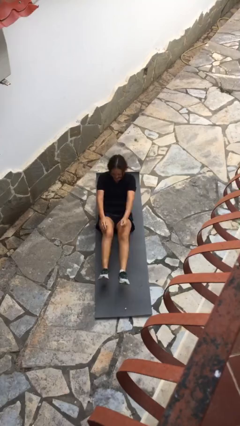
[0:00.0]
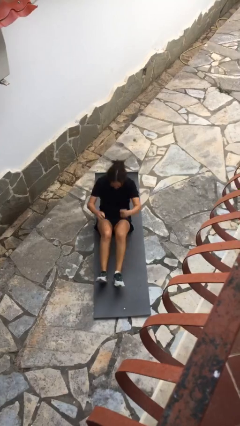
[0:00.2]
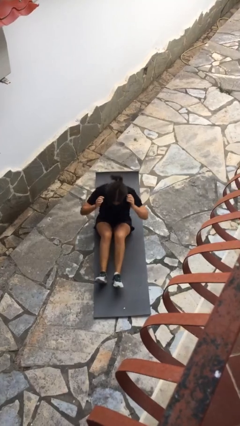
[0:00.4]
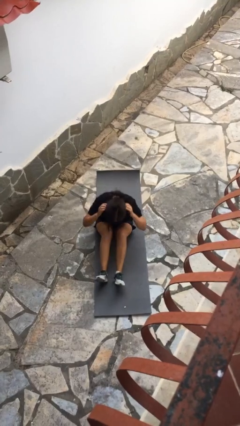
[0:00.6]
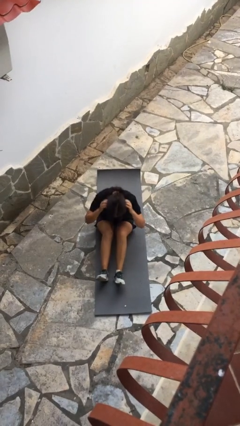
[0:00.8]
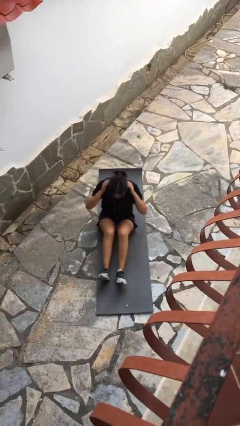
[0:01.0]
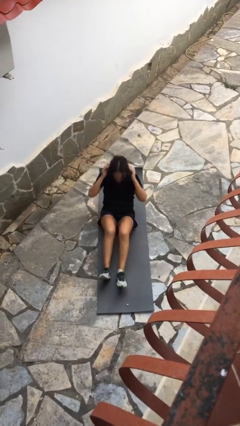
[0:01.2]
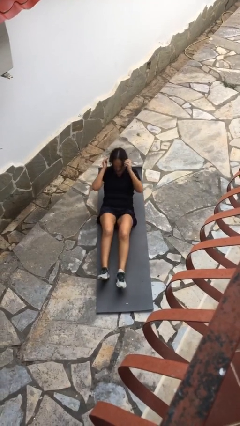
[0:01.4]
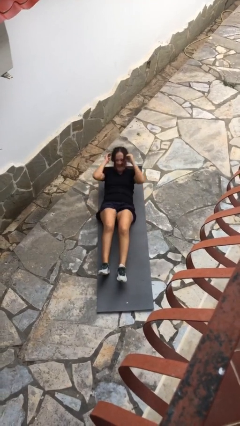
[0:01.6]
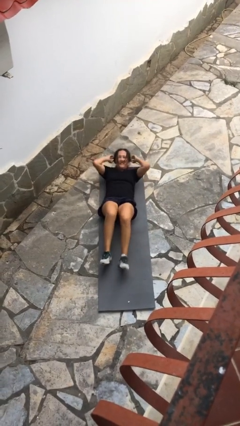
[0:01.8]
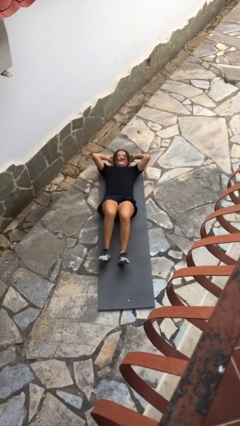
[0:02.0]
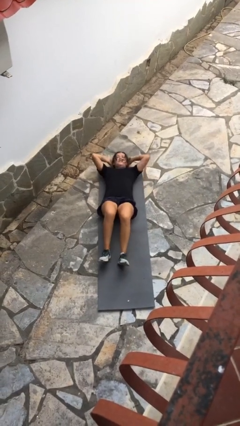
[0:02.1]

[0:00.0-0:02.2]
person exercises with situp

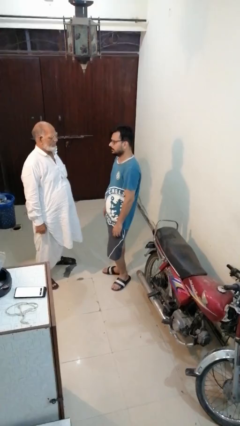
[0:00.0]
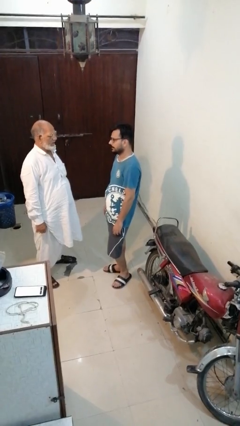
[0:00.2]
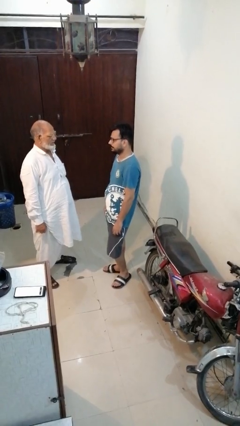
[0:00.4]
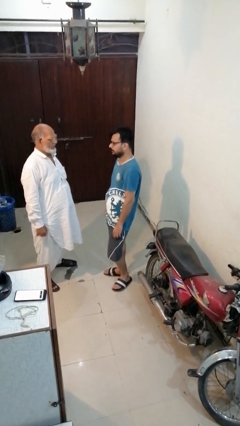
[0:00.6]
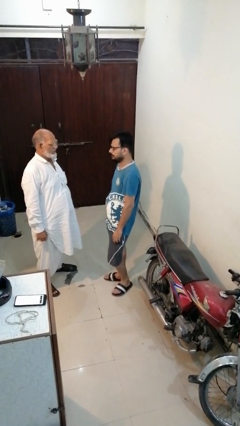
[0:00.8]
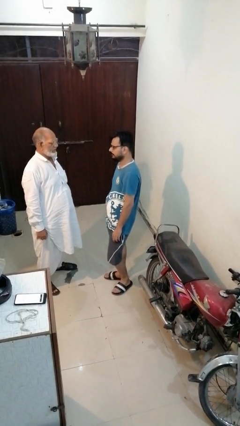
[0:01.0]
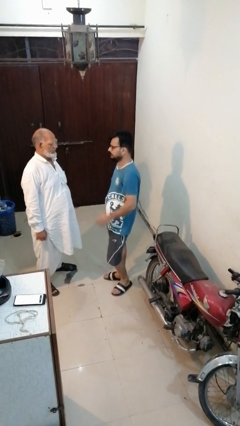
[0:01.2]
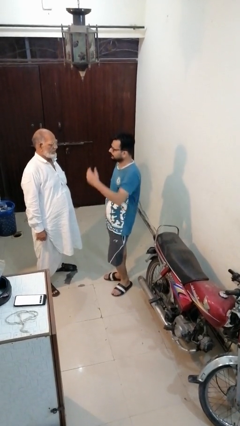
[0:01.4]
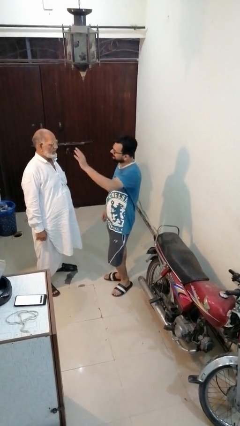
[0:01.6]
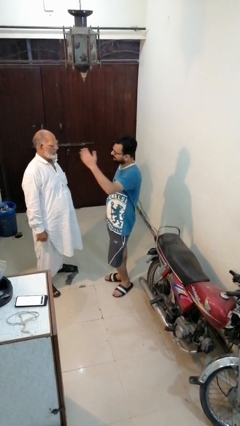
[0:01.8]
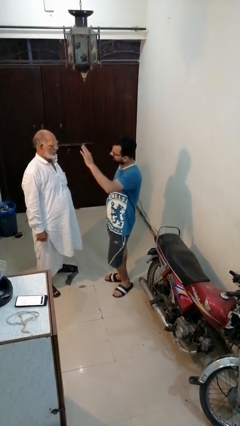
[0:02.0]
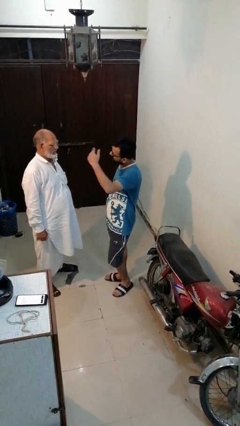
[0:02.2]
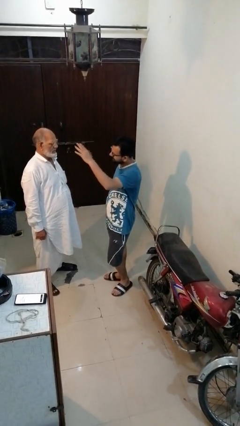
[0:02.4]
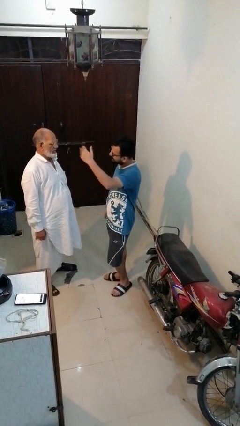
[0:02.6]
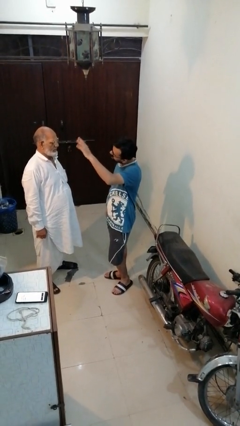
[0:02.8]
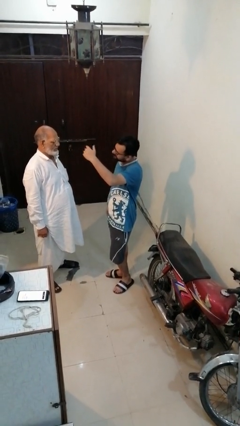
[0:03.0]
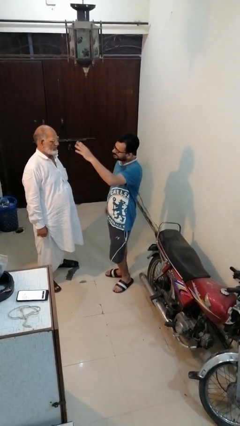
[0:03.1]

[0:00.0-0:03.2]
person shoves person

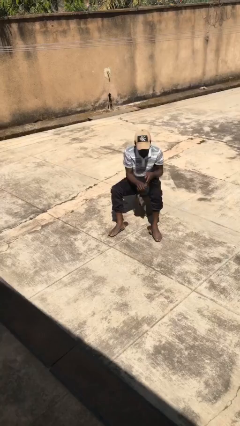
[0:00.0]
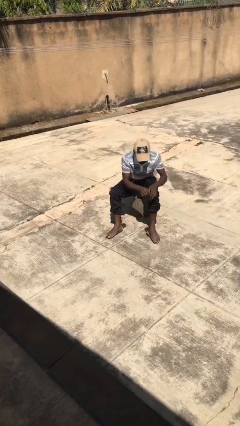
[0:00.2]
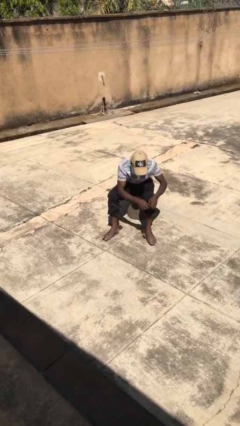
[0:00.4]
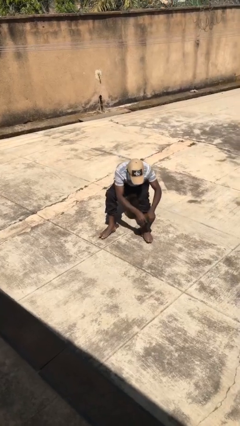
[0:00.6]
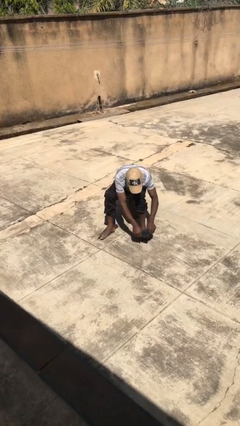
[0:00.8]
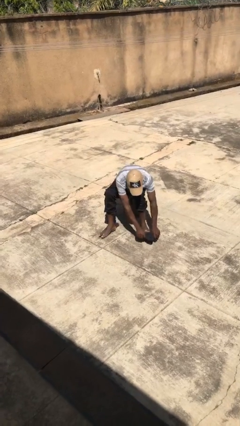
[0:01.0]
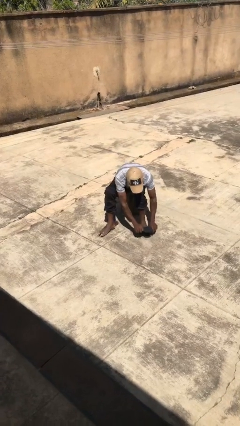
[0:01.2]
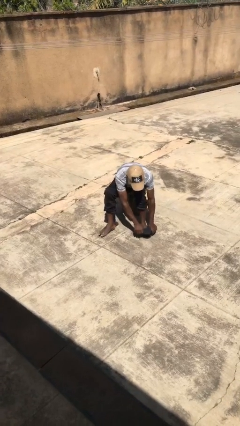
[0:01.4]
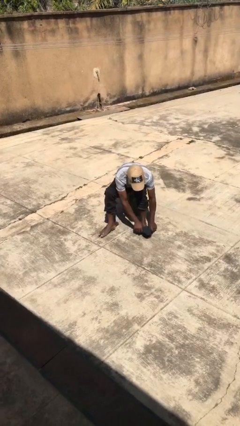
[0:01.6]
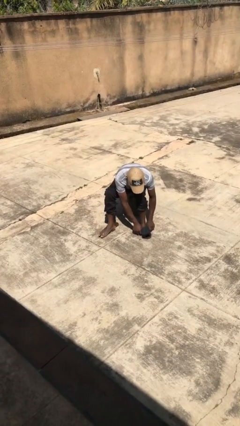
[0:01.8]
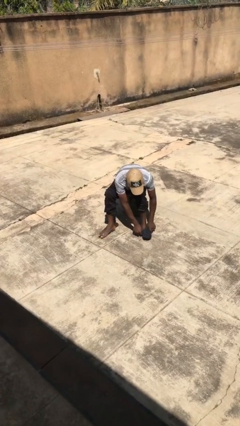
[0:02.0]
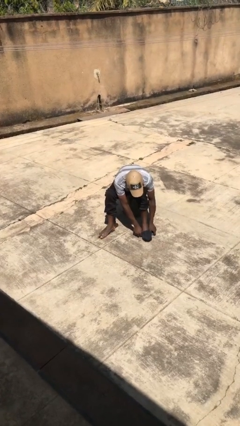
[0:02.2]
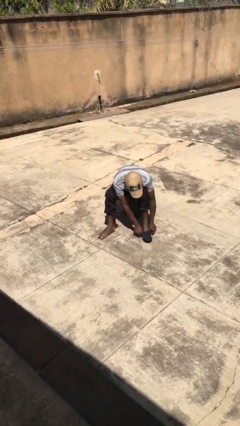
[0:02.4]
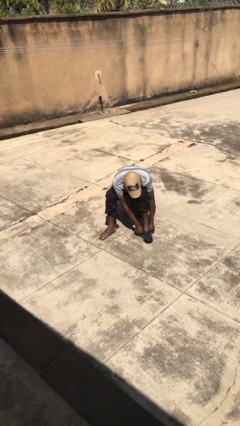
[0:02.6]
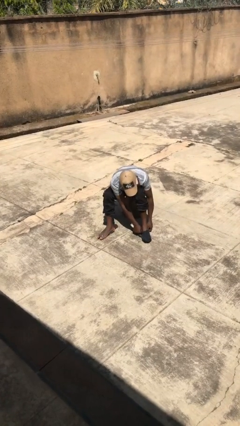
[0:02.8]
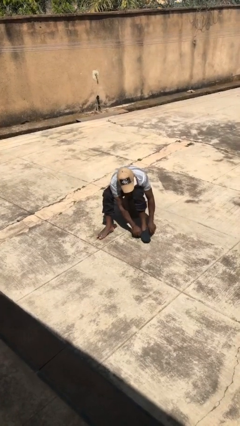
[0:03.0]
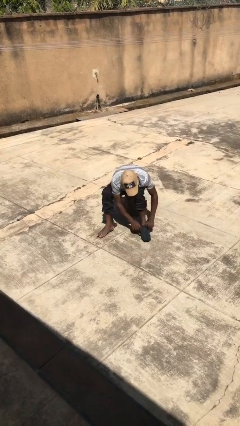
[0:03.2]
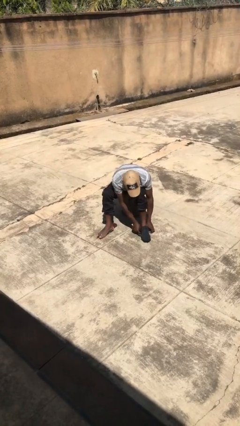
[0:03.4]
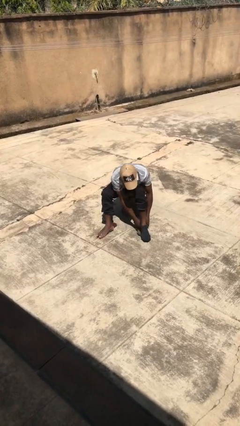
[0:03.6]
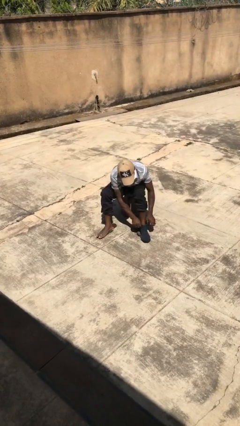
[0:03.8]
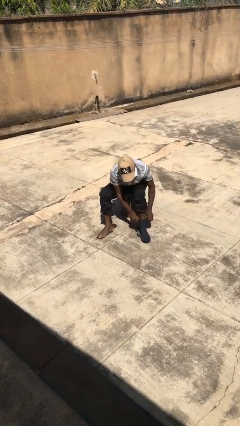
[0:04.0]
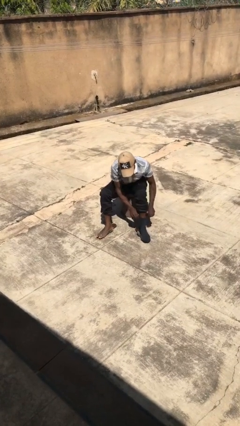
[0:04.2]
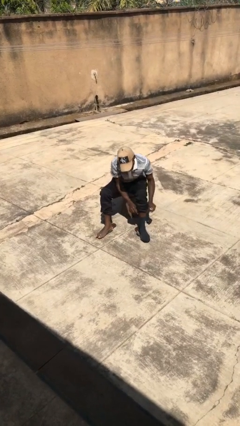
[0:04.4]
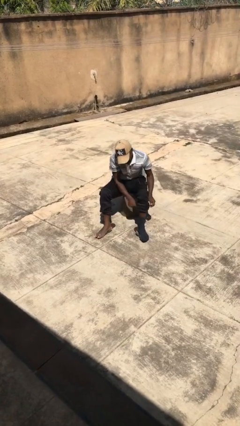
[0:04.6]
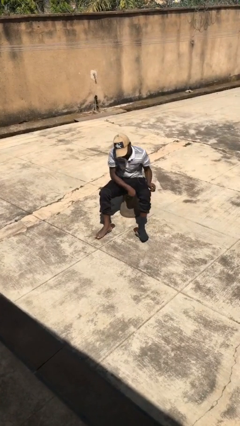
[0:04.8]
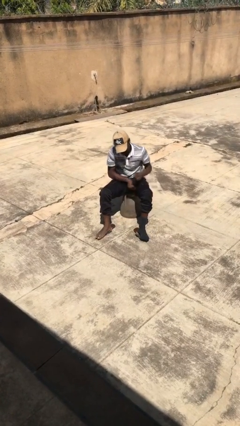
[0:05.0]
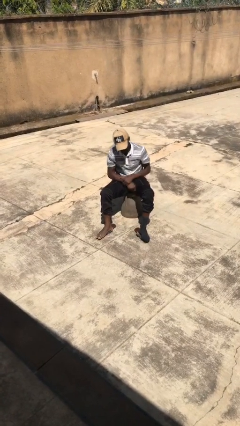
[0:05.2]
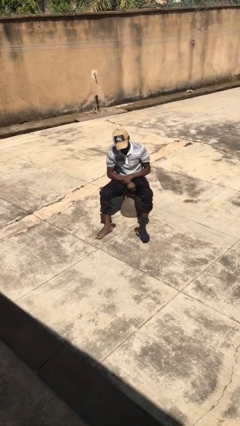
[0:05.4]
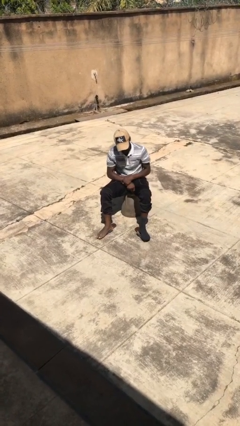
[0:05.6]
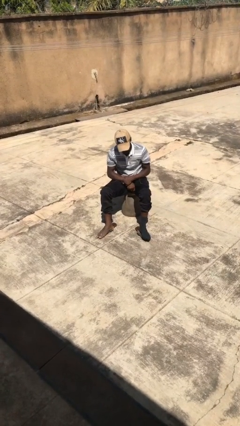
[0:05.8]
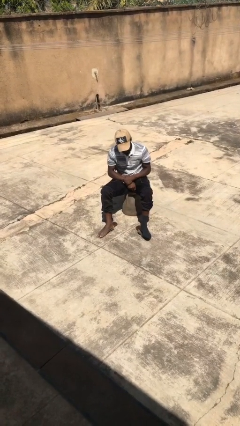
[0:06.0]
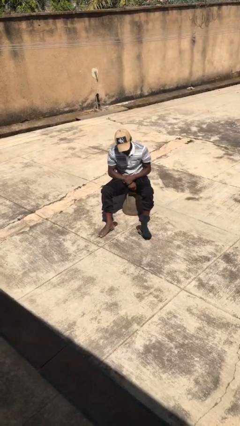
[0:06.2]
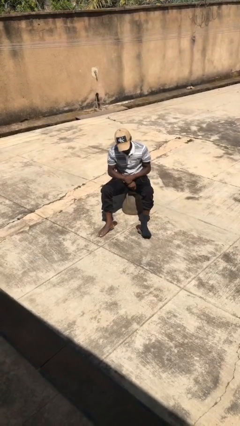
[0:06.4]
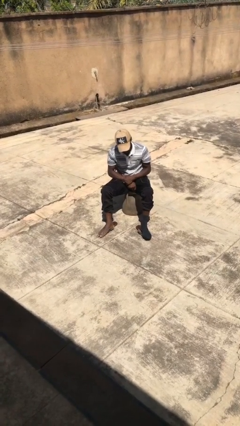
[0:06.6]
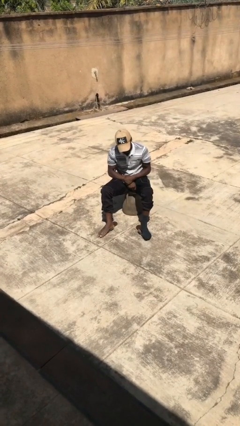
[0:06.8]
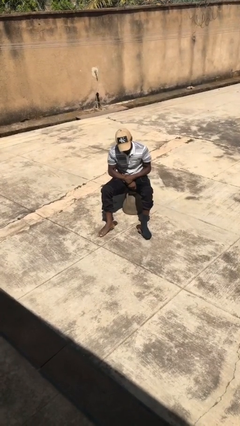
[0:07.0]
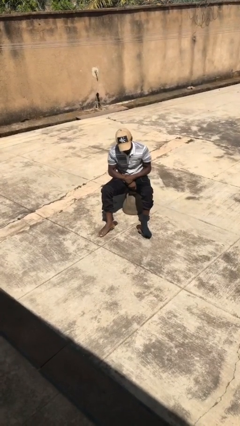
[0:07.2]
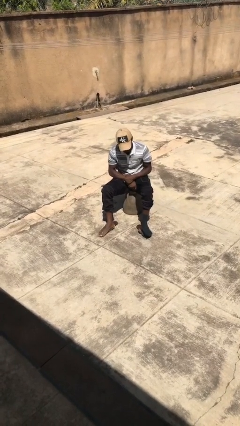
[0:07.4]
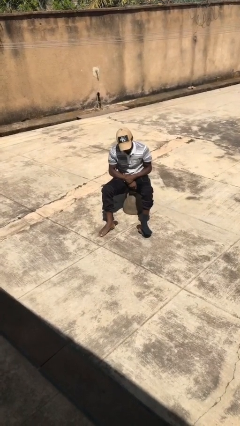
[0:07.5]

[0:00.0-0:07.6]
person puts on socks

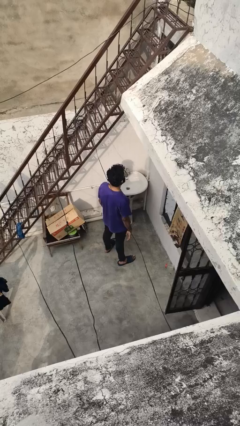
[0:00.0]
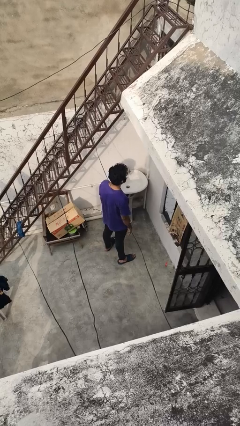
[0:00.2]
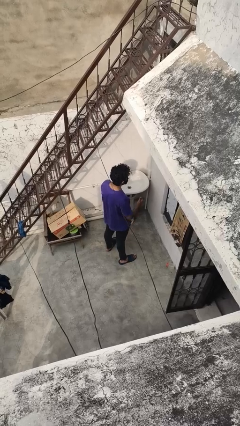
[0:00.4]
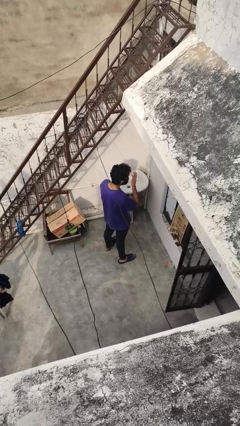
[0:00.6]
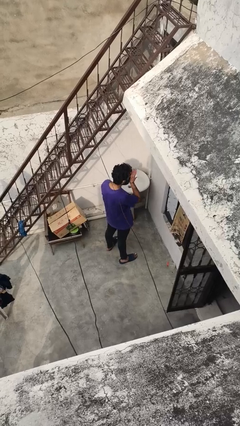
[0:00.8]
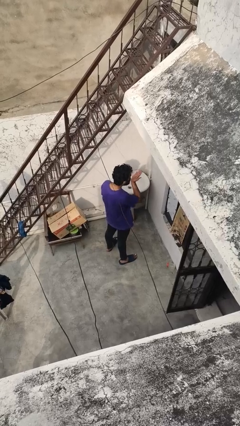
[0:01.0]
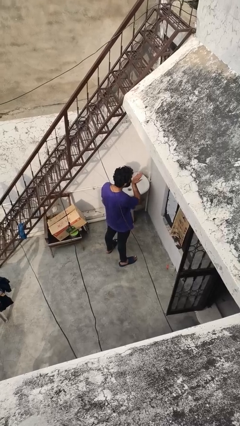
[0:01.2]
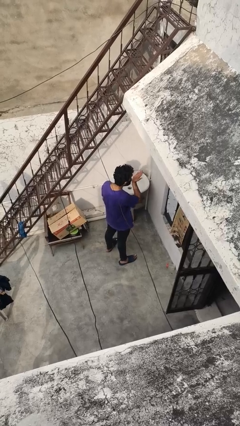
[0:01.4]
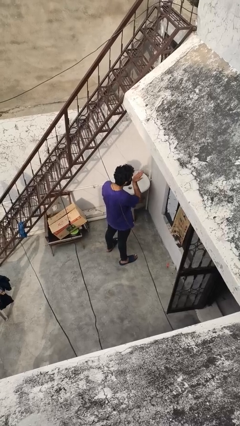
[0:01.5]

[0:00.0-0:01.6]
person gestures blow kiss

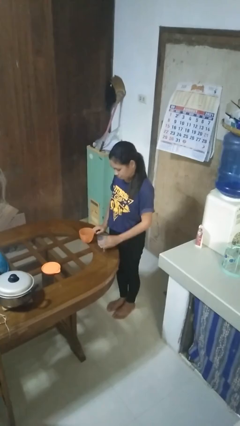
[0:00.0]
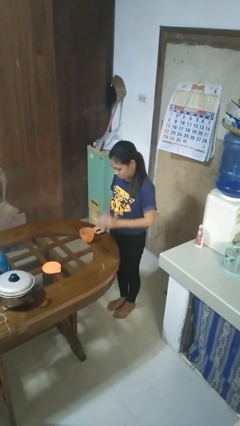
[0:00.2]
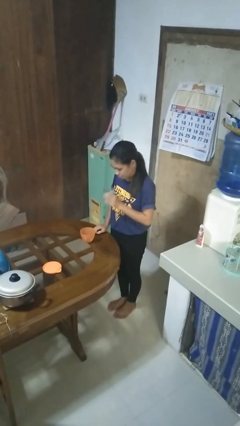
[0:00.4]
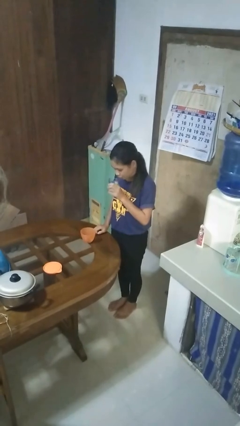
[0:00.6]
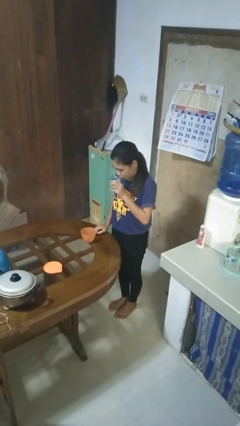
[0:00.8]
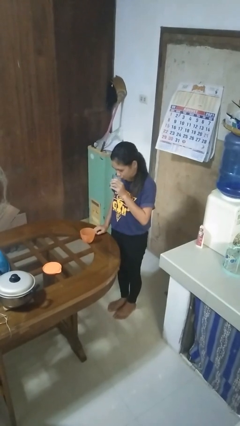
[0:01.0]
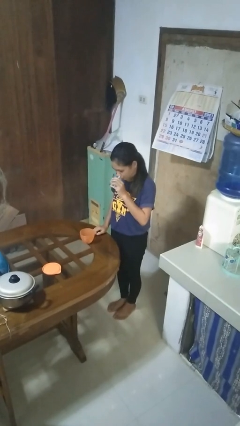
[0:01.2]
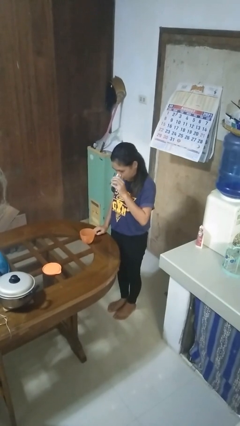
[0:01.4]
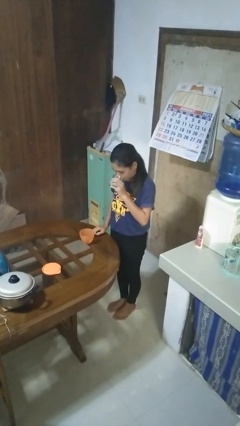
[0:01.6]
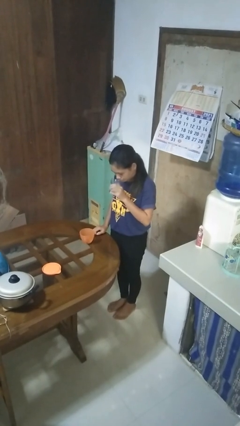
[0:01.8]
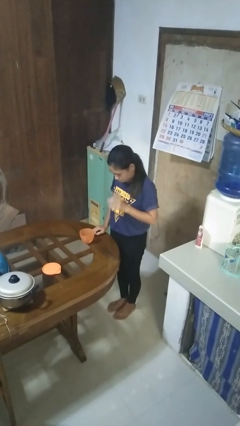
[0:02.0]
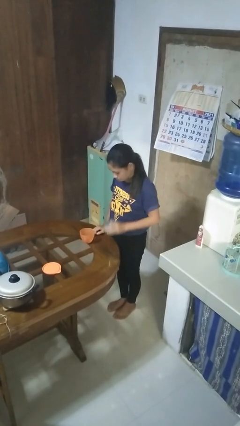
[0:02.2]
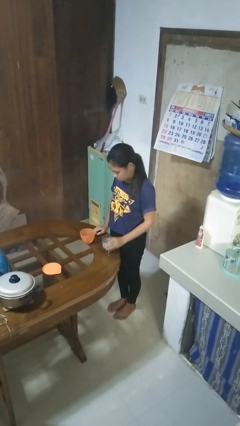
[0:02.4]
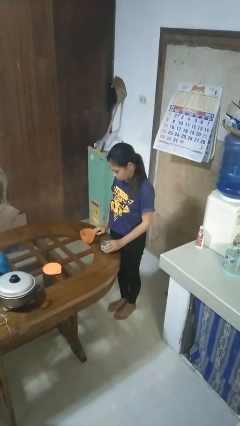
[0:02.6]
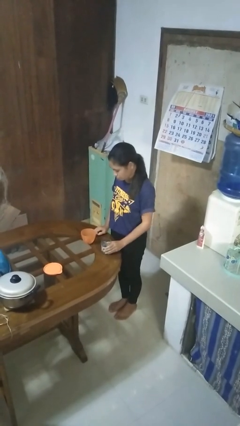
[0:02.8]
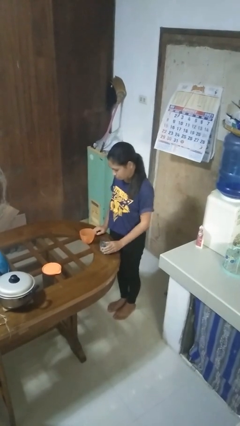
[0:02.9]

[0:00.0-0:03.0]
person drinks from cup

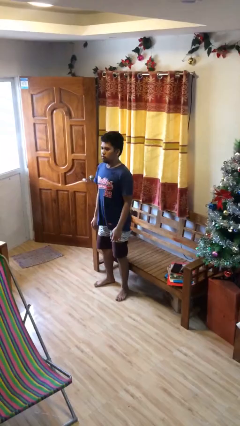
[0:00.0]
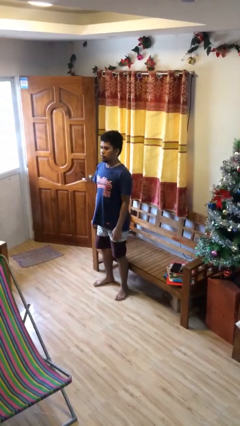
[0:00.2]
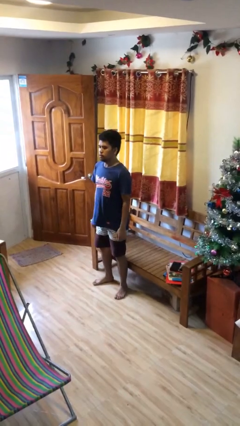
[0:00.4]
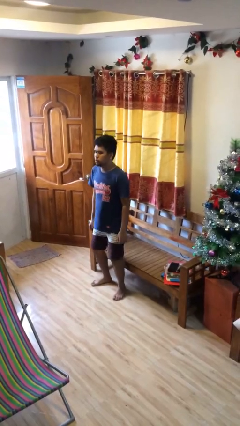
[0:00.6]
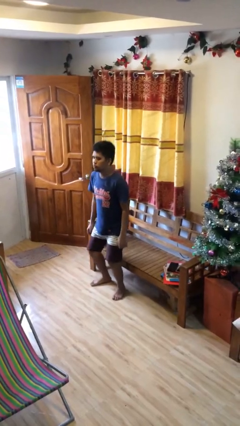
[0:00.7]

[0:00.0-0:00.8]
person stands up
